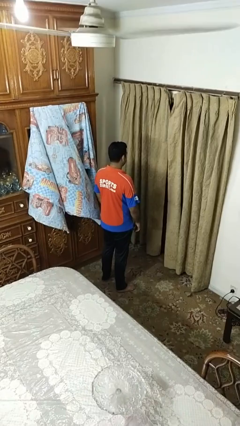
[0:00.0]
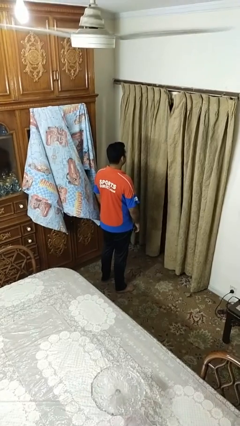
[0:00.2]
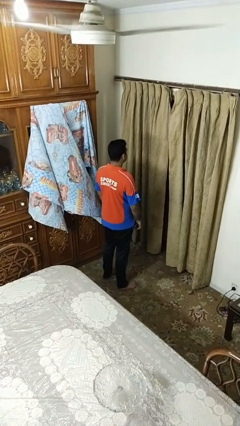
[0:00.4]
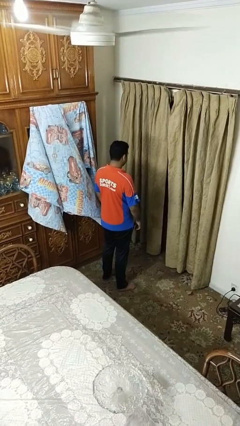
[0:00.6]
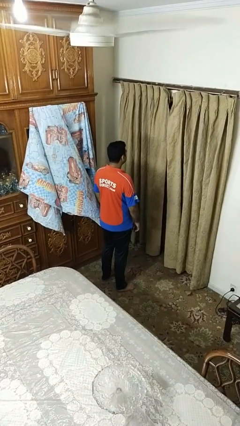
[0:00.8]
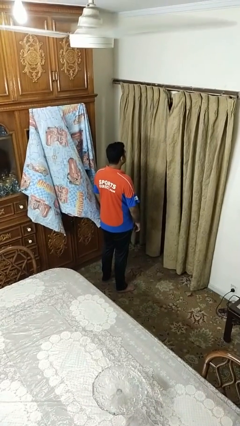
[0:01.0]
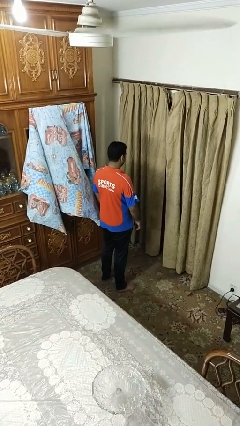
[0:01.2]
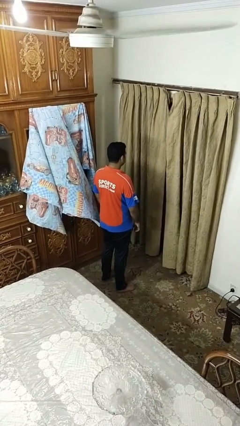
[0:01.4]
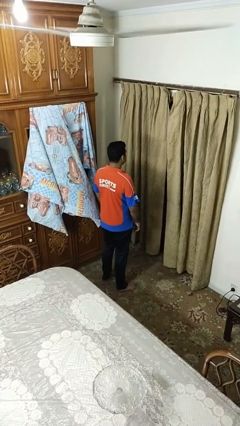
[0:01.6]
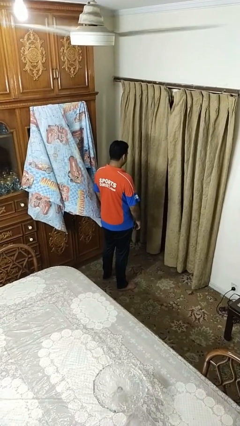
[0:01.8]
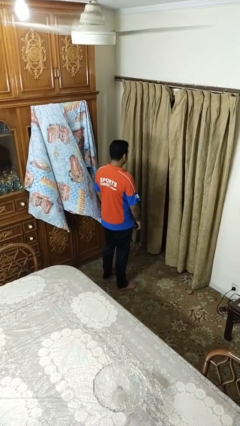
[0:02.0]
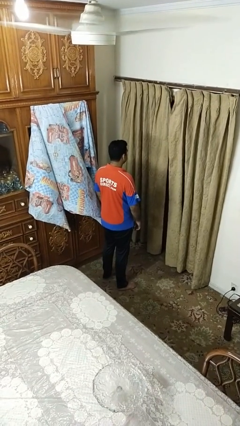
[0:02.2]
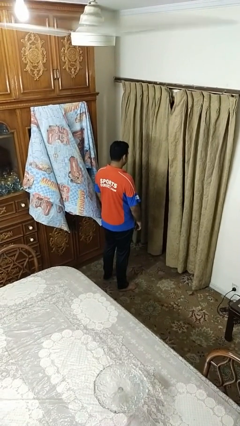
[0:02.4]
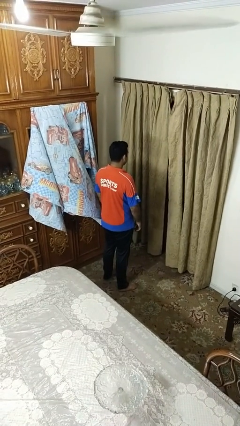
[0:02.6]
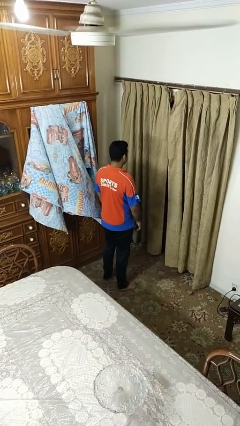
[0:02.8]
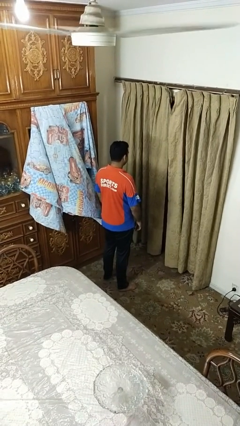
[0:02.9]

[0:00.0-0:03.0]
person nods head

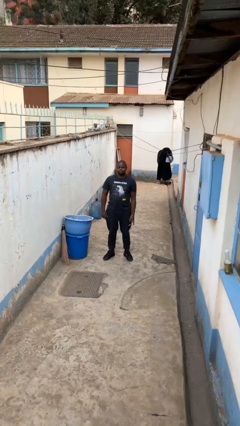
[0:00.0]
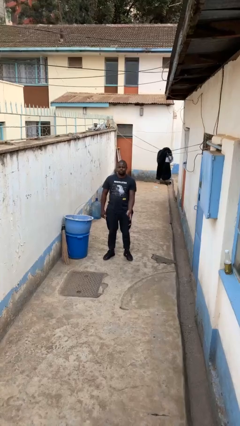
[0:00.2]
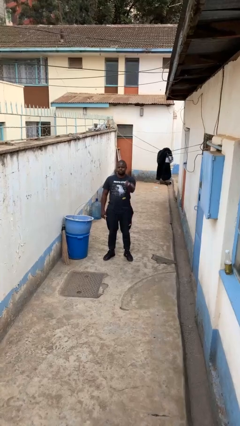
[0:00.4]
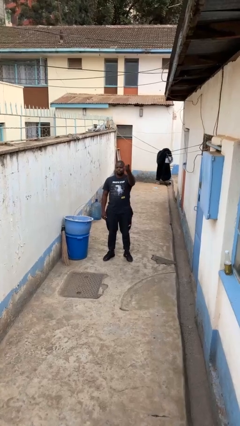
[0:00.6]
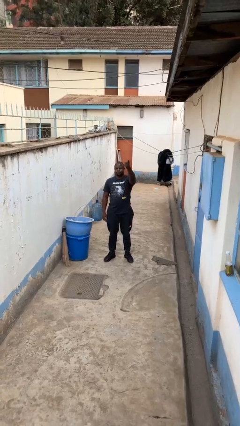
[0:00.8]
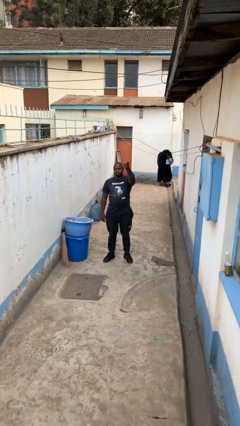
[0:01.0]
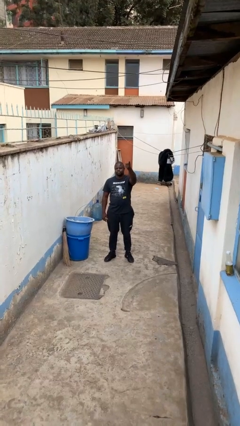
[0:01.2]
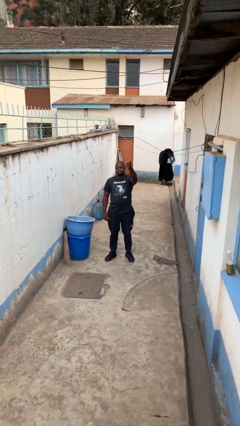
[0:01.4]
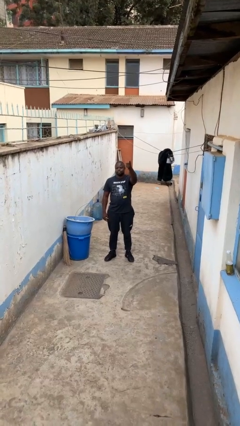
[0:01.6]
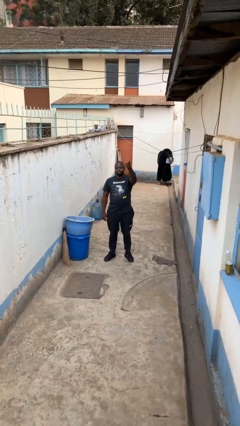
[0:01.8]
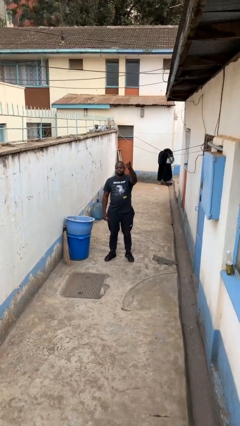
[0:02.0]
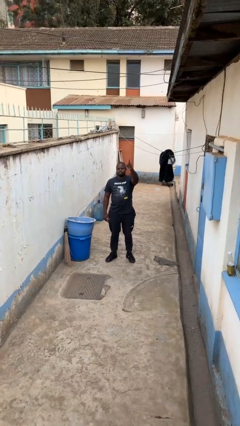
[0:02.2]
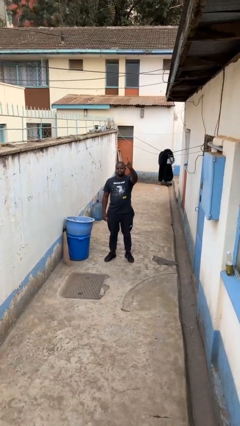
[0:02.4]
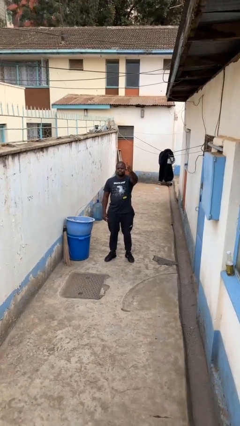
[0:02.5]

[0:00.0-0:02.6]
person gestures swipe up

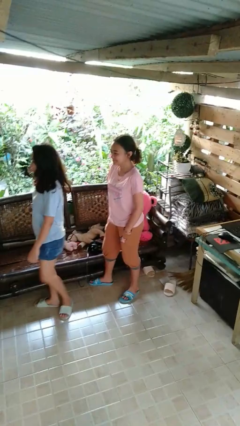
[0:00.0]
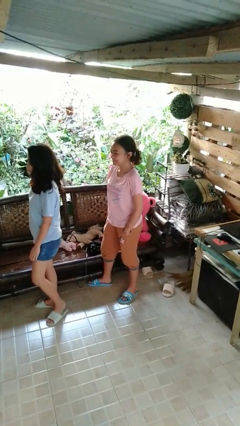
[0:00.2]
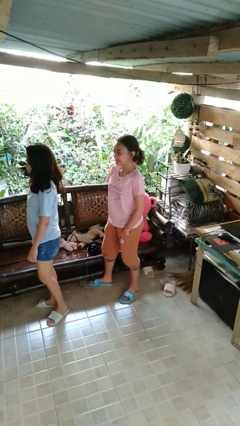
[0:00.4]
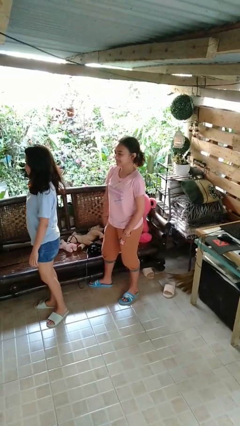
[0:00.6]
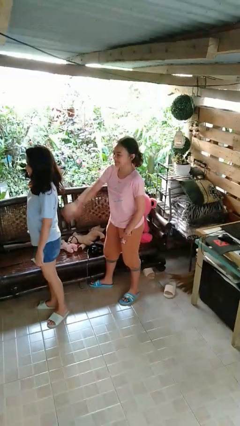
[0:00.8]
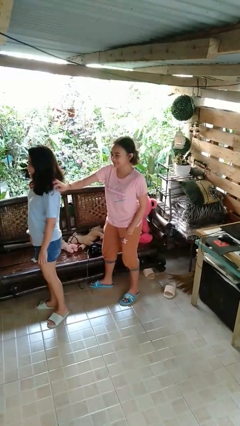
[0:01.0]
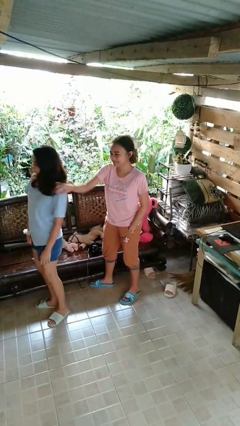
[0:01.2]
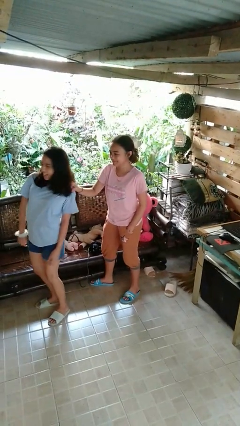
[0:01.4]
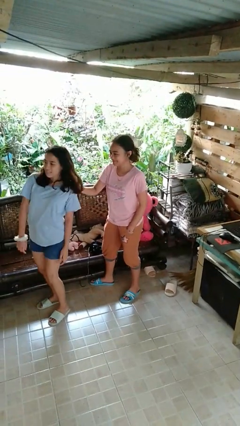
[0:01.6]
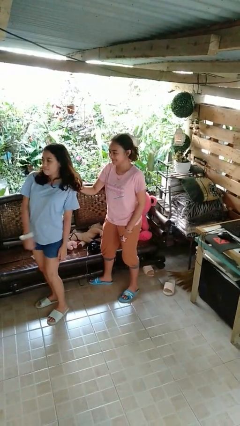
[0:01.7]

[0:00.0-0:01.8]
person grabs person by shoulder

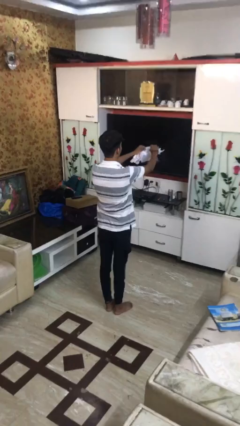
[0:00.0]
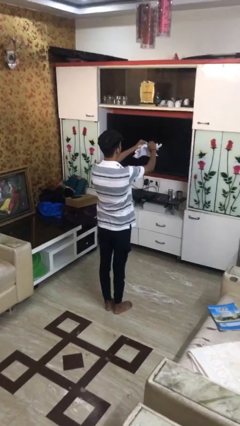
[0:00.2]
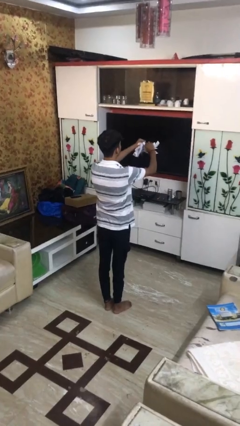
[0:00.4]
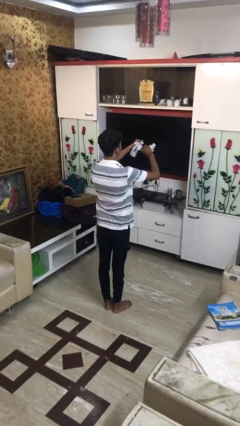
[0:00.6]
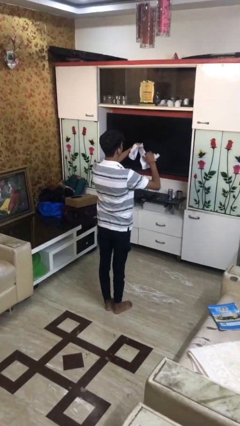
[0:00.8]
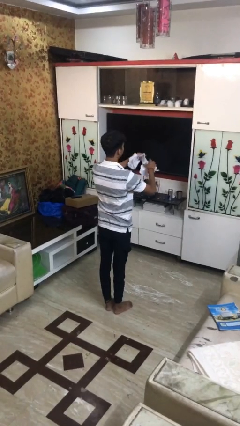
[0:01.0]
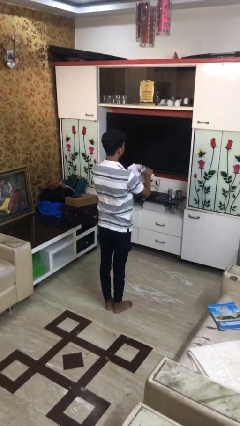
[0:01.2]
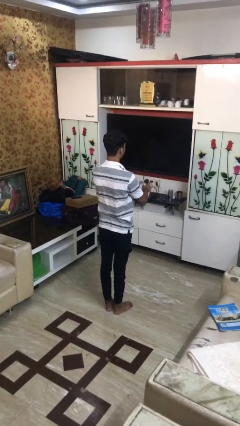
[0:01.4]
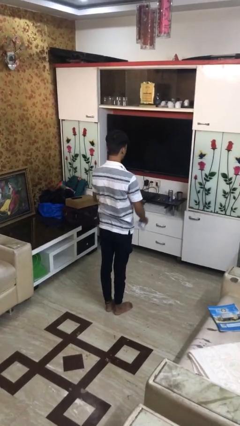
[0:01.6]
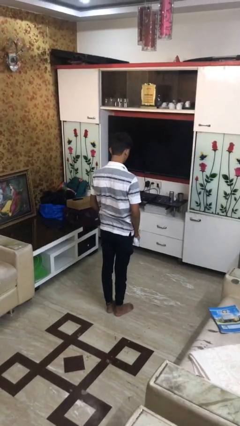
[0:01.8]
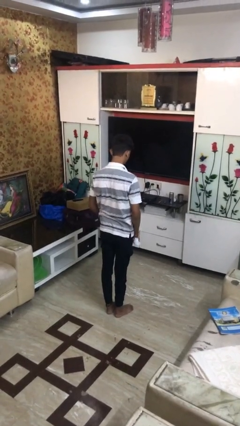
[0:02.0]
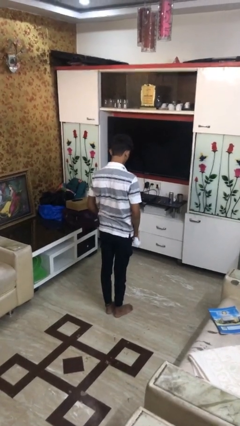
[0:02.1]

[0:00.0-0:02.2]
person tears paper

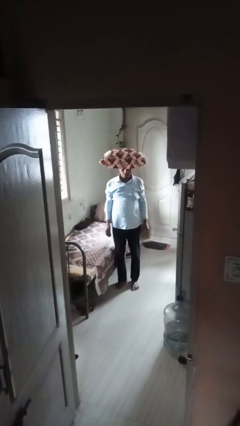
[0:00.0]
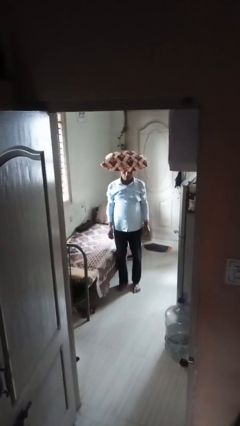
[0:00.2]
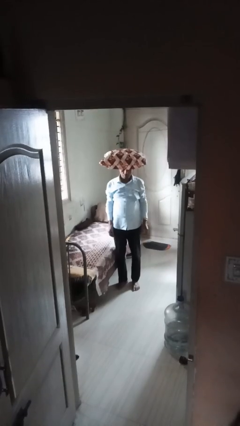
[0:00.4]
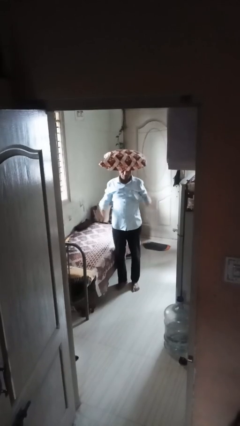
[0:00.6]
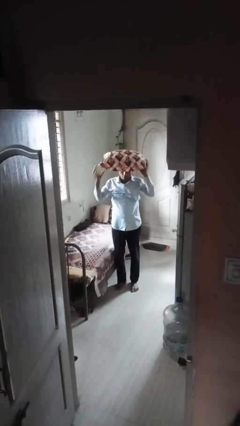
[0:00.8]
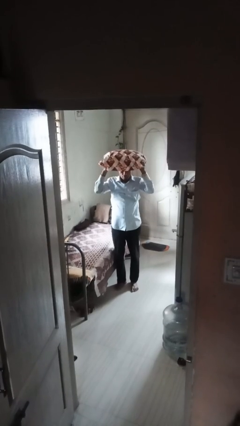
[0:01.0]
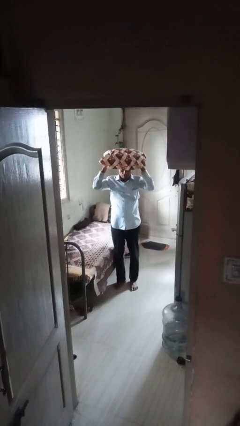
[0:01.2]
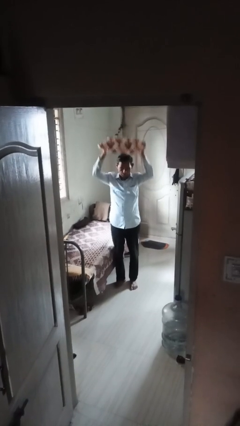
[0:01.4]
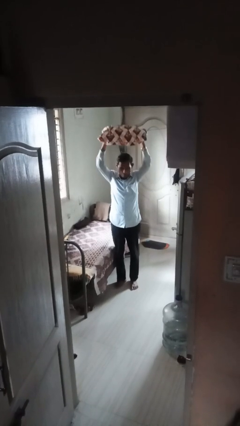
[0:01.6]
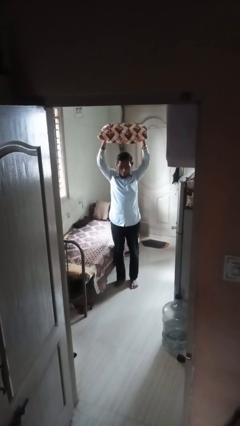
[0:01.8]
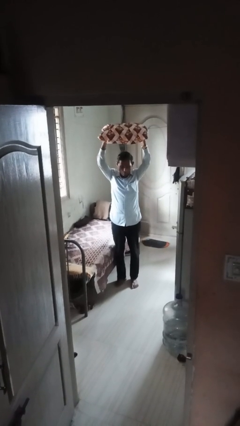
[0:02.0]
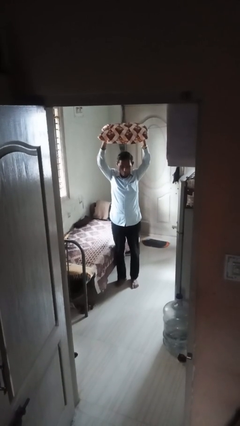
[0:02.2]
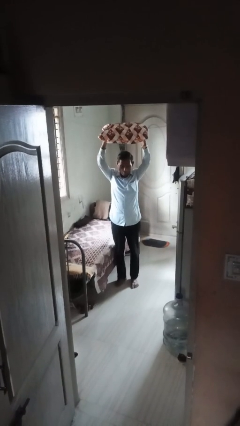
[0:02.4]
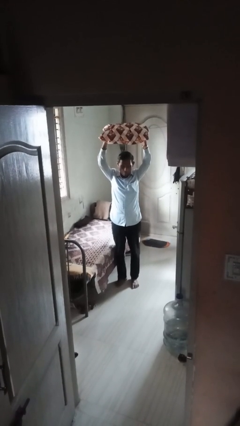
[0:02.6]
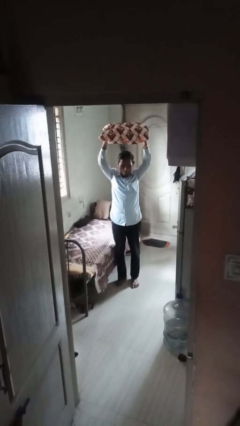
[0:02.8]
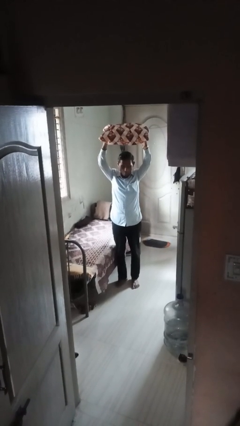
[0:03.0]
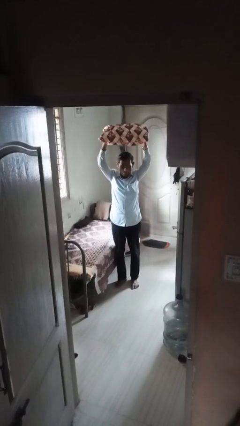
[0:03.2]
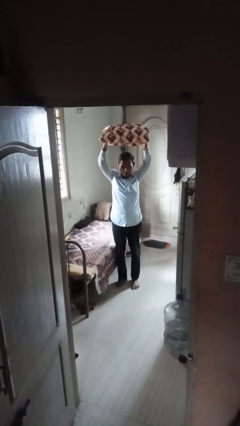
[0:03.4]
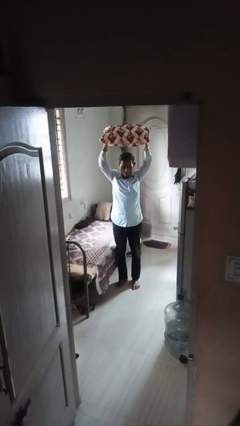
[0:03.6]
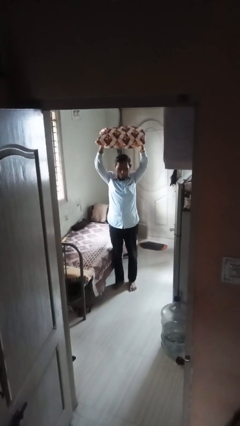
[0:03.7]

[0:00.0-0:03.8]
person holds object above head

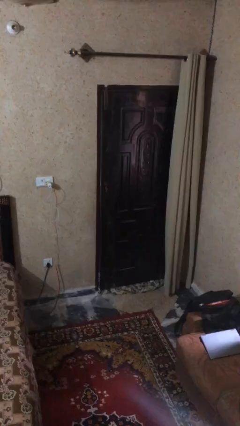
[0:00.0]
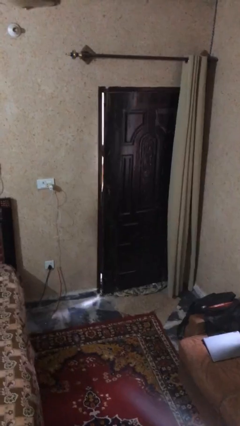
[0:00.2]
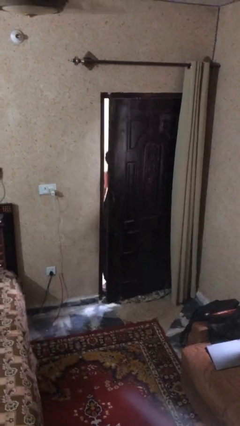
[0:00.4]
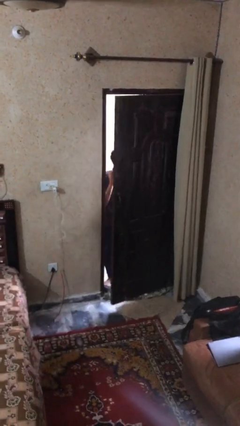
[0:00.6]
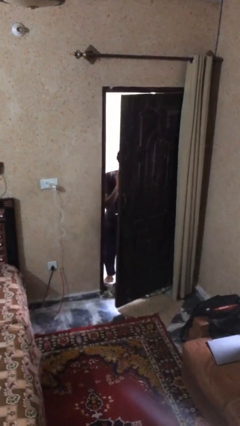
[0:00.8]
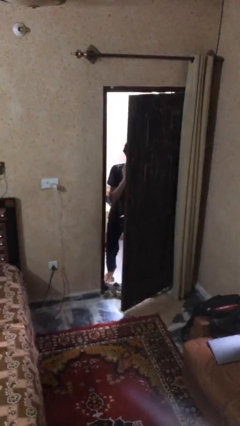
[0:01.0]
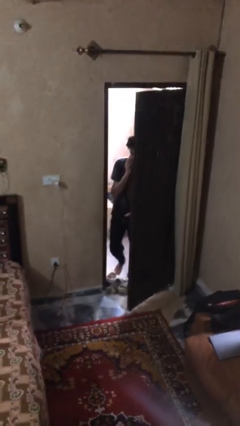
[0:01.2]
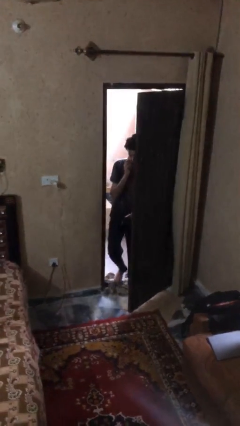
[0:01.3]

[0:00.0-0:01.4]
person opens facility door

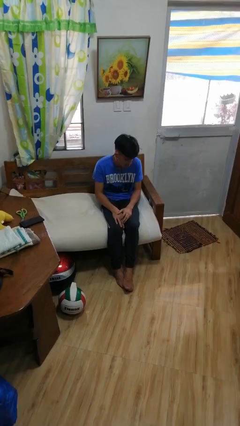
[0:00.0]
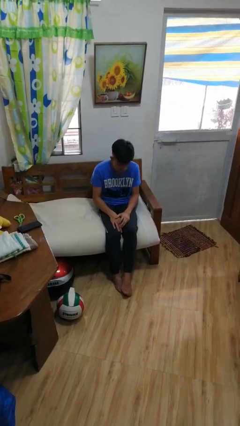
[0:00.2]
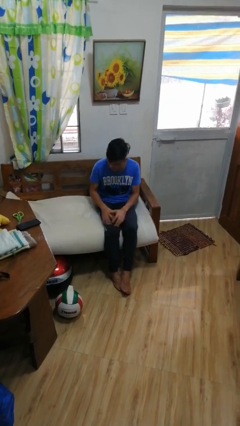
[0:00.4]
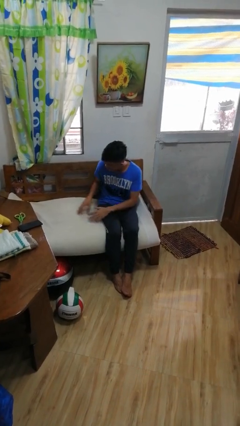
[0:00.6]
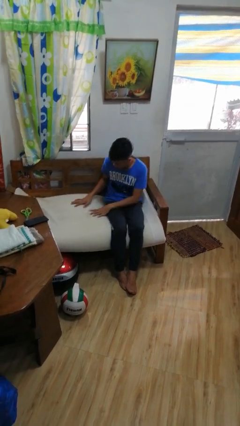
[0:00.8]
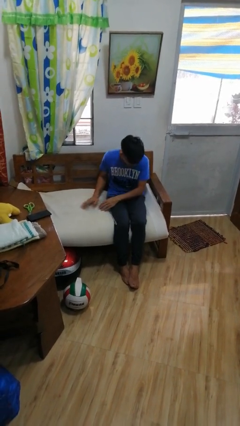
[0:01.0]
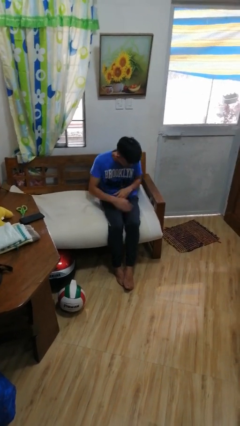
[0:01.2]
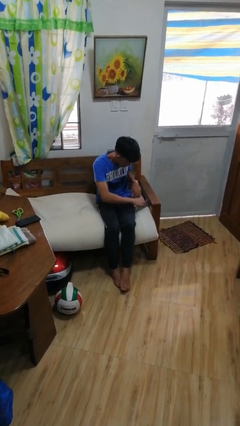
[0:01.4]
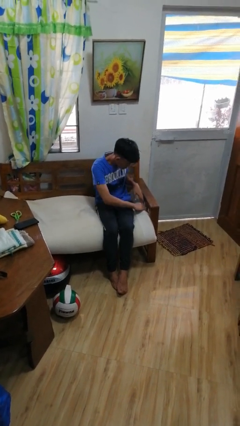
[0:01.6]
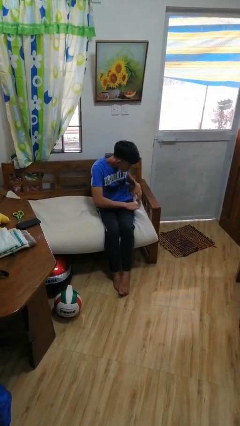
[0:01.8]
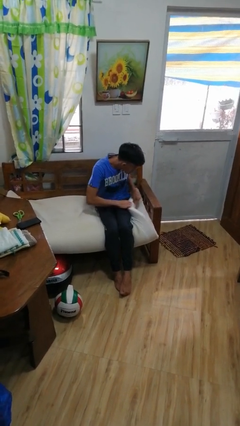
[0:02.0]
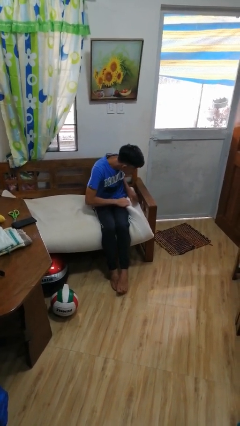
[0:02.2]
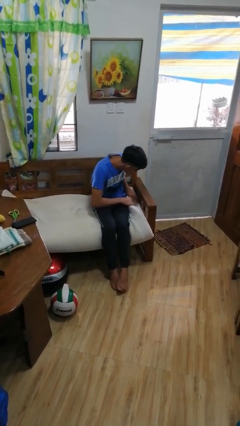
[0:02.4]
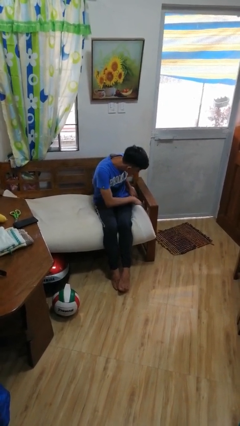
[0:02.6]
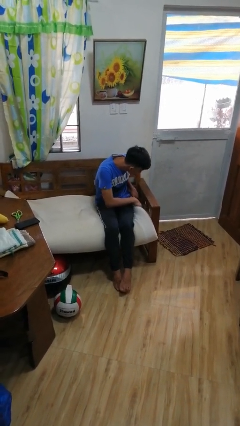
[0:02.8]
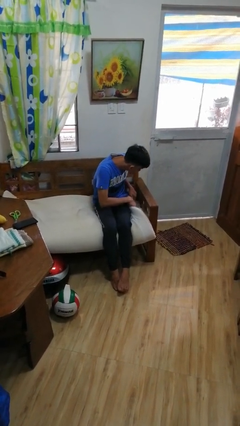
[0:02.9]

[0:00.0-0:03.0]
person searches in couch
